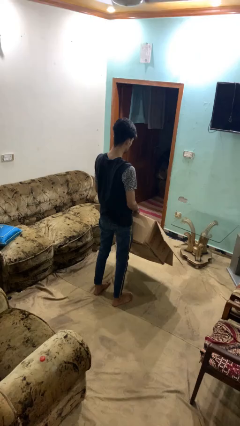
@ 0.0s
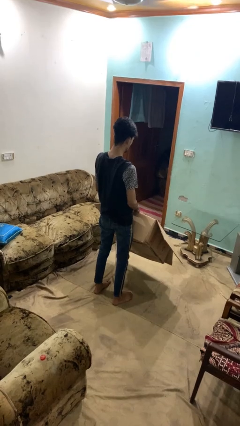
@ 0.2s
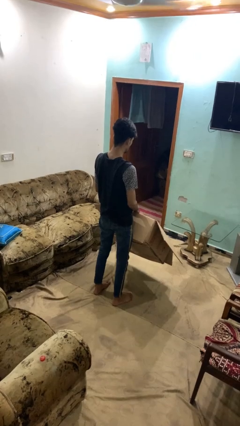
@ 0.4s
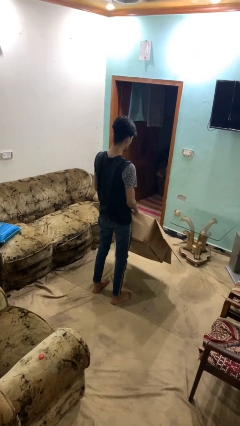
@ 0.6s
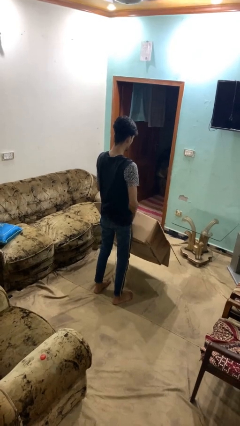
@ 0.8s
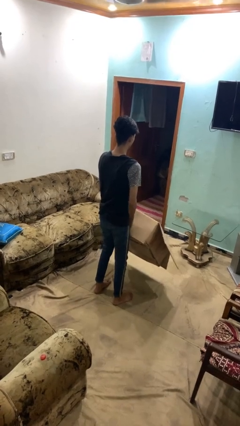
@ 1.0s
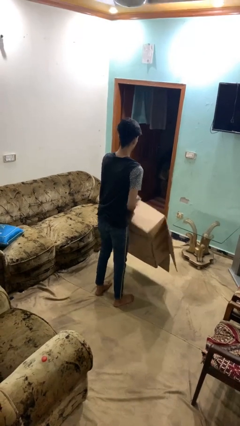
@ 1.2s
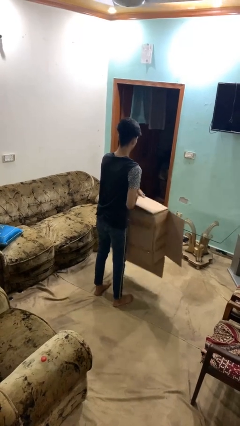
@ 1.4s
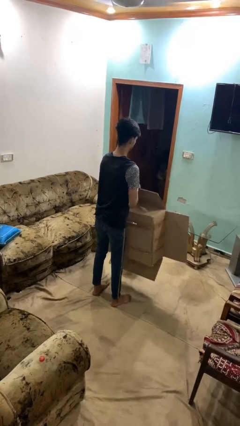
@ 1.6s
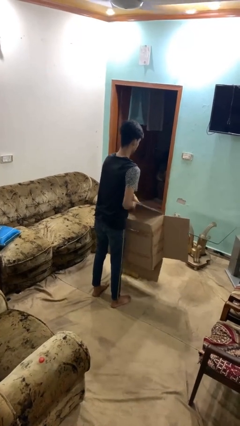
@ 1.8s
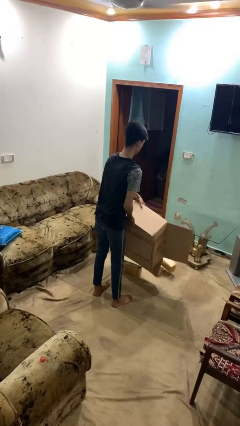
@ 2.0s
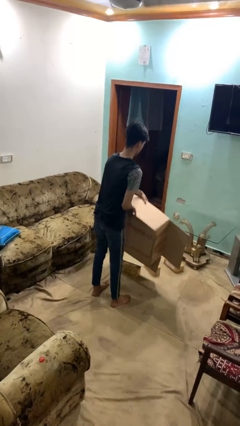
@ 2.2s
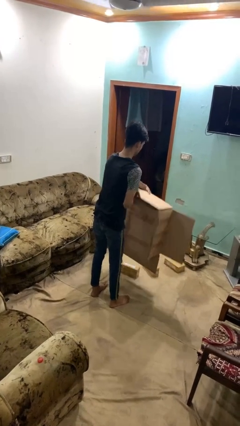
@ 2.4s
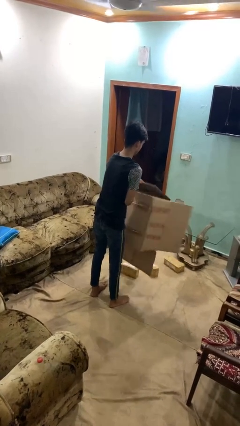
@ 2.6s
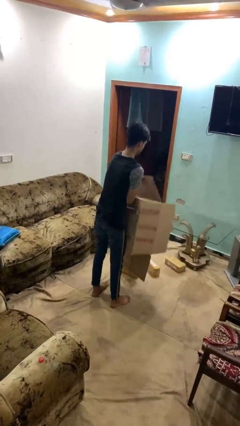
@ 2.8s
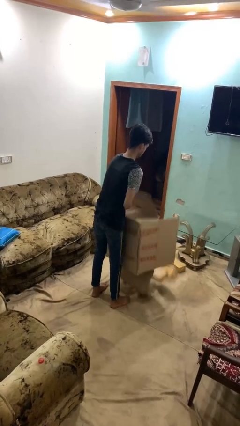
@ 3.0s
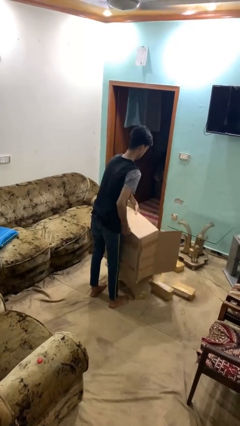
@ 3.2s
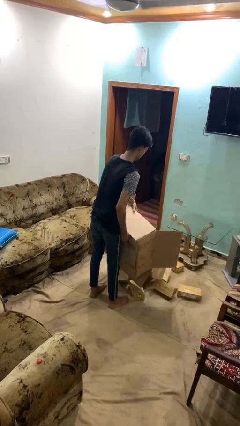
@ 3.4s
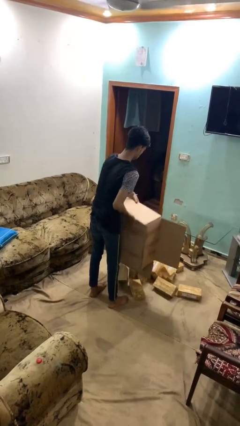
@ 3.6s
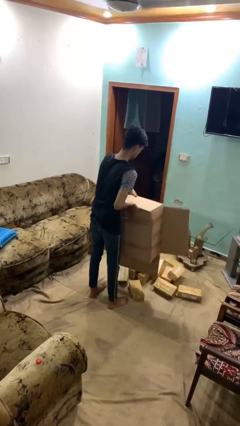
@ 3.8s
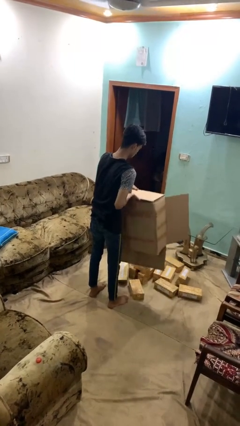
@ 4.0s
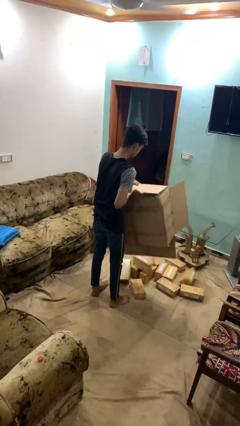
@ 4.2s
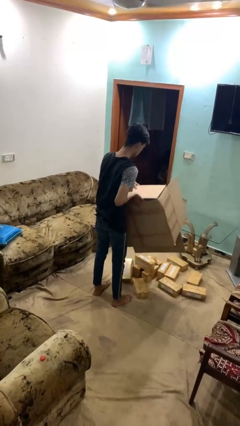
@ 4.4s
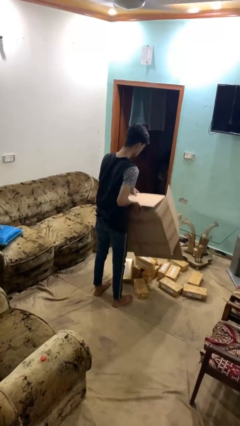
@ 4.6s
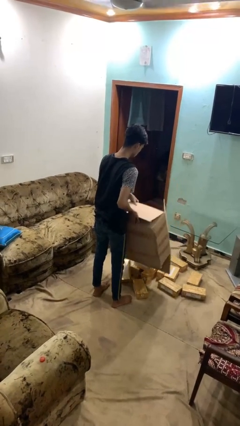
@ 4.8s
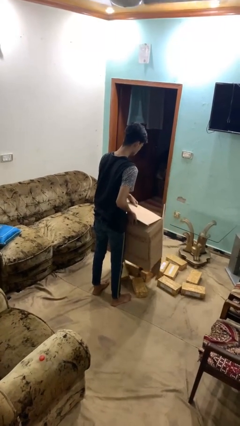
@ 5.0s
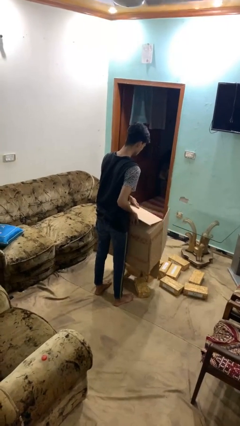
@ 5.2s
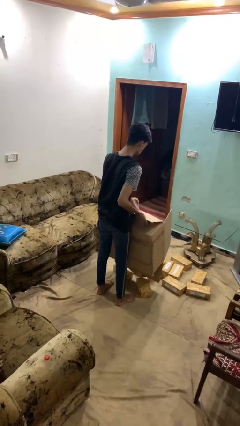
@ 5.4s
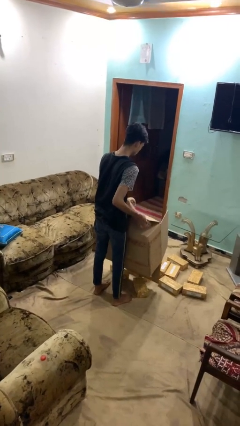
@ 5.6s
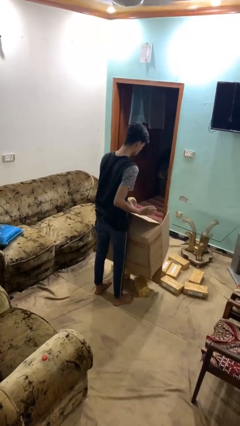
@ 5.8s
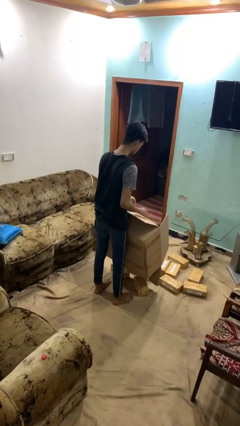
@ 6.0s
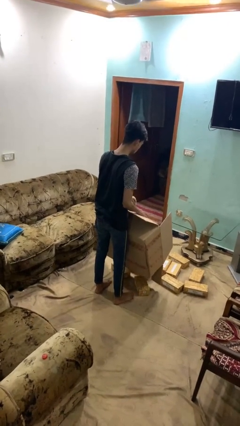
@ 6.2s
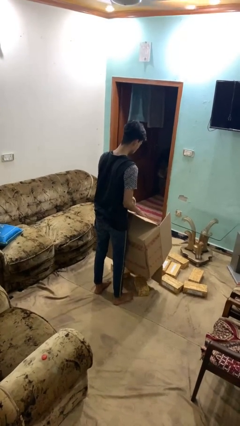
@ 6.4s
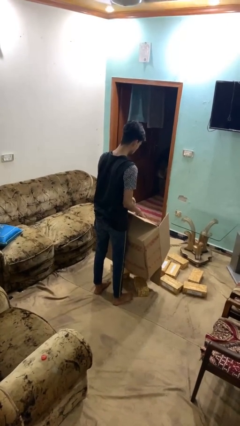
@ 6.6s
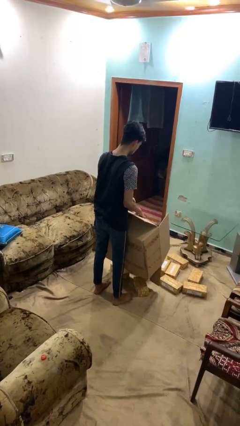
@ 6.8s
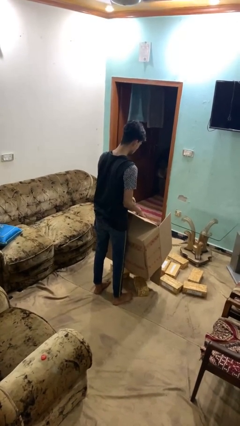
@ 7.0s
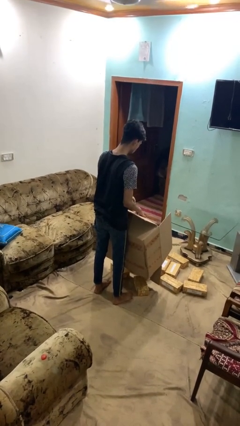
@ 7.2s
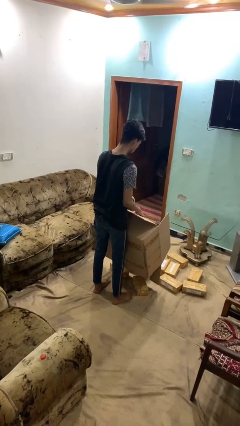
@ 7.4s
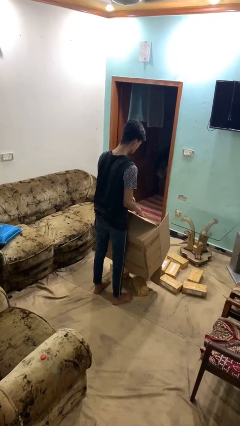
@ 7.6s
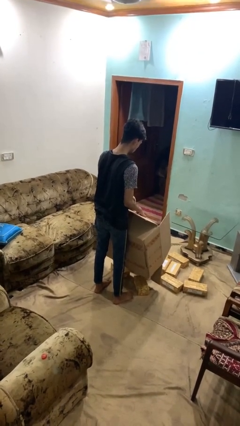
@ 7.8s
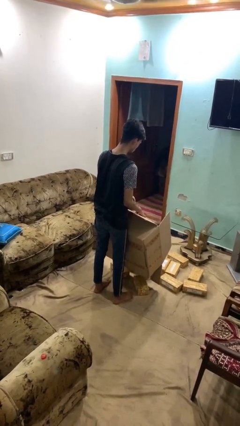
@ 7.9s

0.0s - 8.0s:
person unloads box onto floor

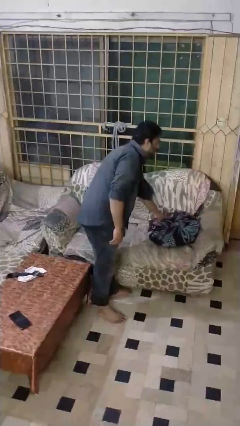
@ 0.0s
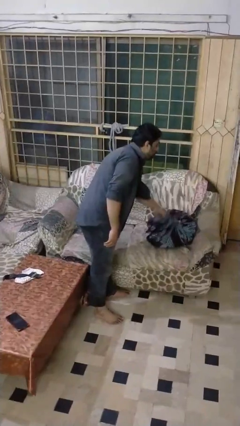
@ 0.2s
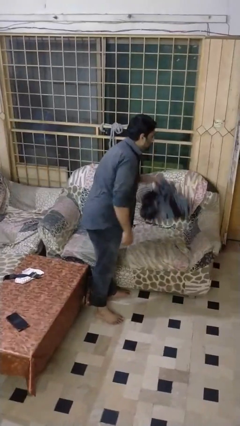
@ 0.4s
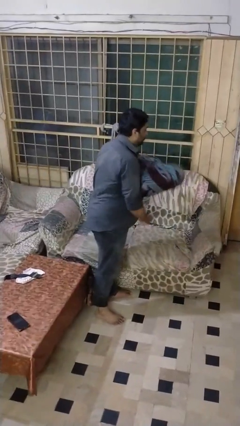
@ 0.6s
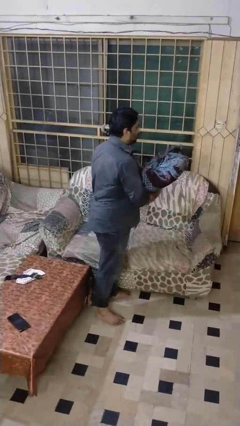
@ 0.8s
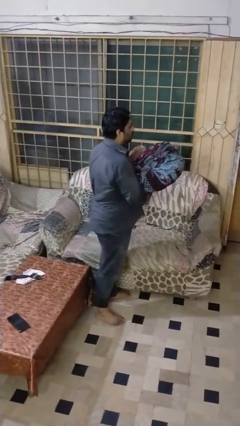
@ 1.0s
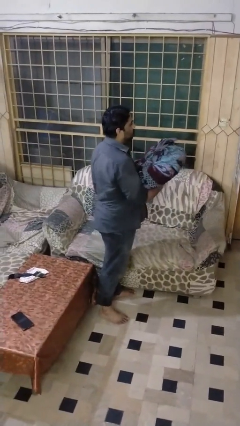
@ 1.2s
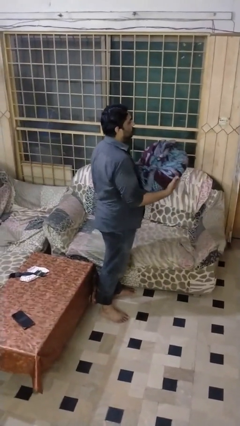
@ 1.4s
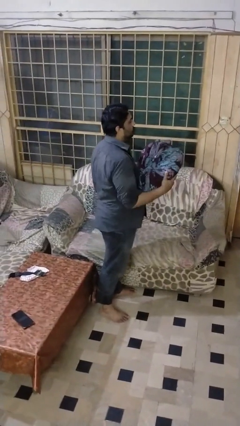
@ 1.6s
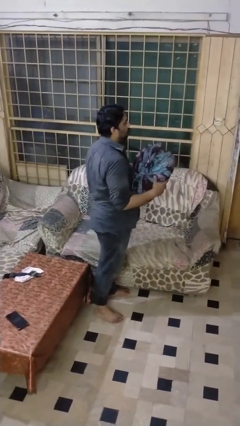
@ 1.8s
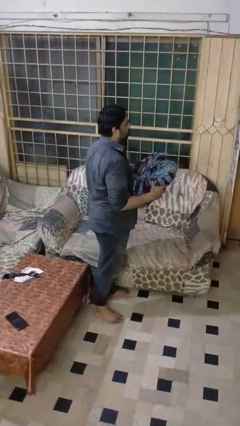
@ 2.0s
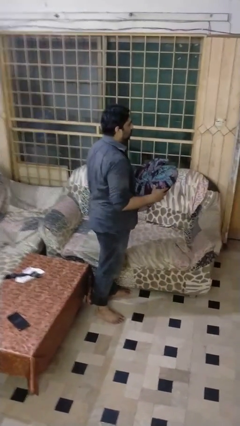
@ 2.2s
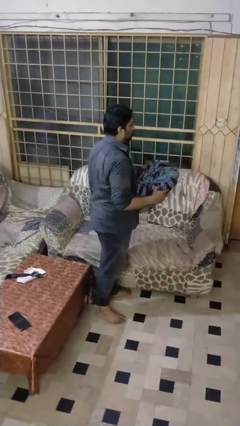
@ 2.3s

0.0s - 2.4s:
person picks up object from couch

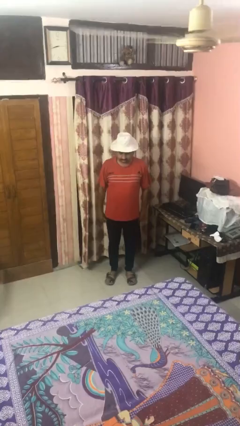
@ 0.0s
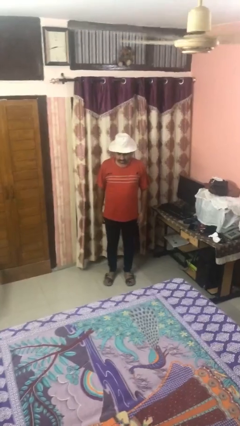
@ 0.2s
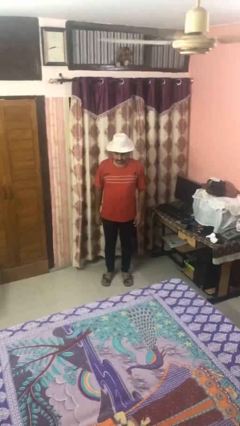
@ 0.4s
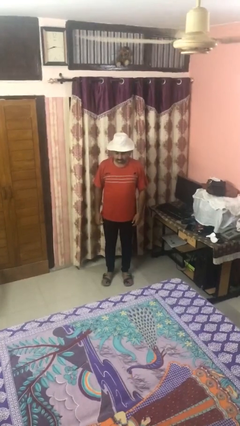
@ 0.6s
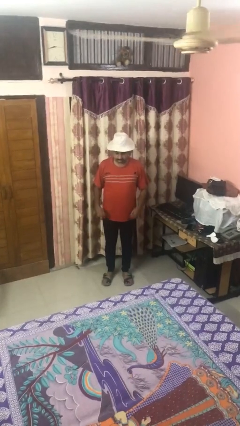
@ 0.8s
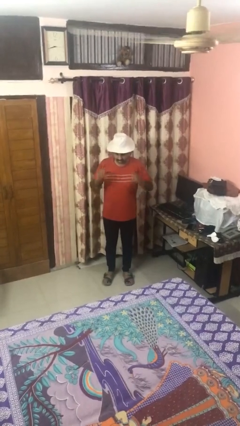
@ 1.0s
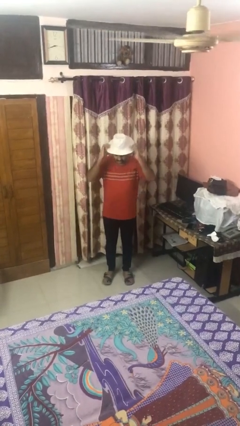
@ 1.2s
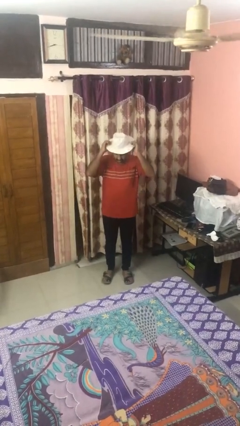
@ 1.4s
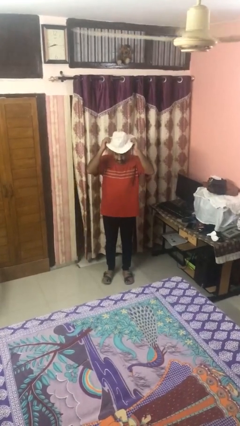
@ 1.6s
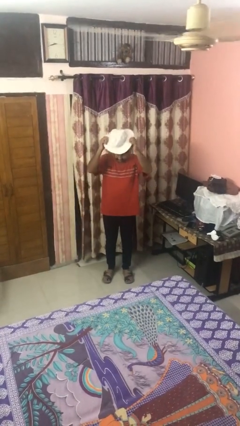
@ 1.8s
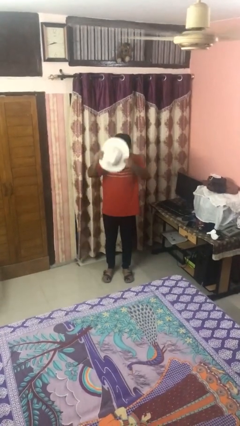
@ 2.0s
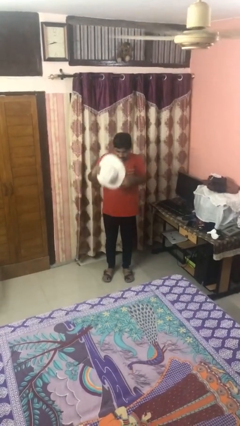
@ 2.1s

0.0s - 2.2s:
person takes off hat

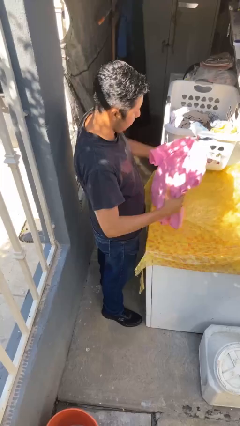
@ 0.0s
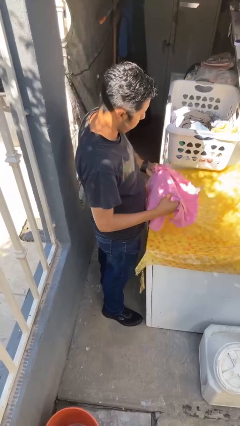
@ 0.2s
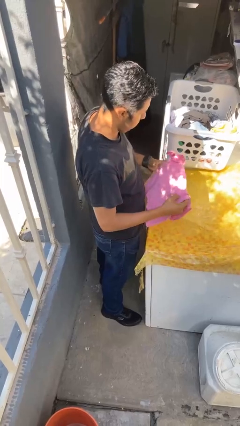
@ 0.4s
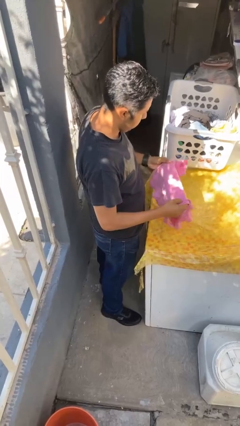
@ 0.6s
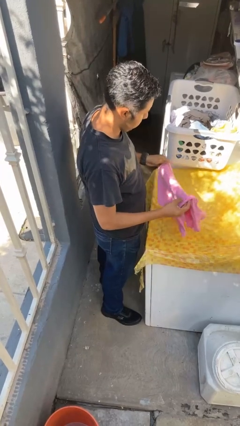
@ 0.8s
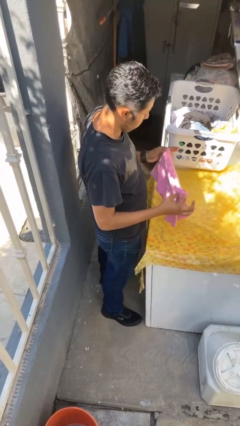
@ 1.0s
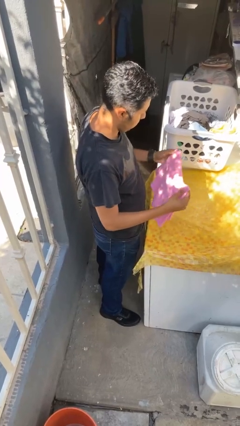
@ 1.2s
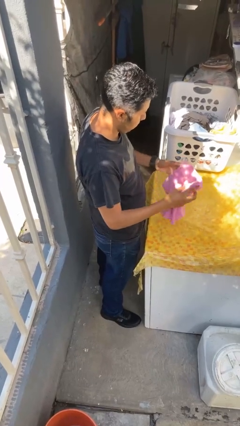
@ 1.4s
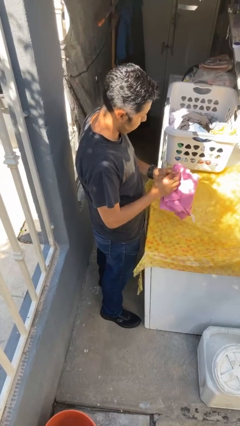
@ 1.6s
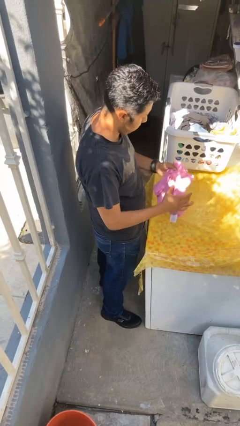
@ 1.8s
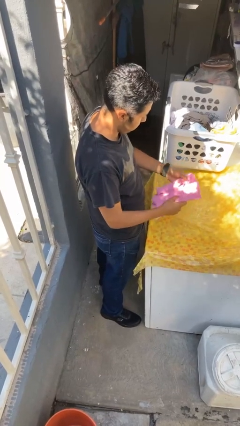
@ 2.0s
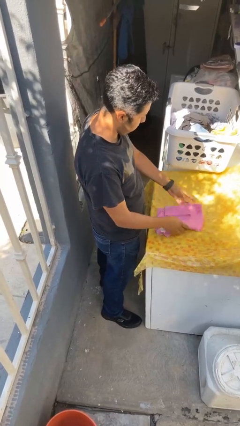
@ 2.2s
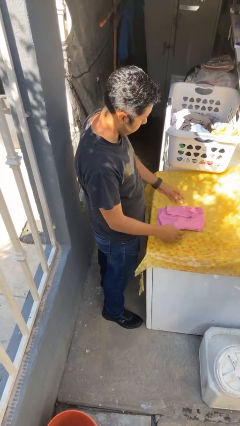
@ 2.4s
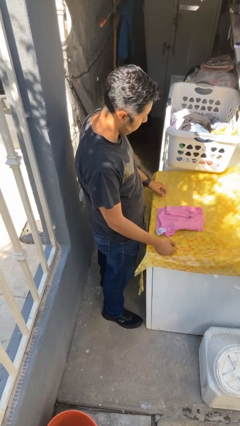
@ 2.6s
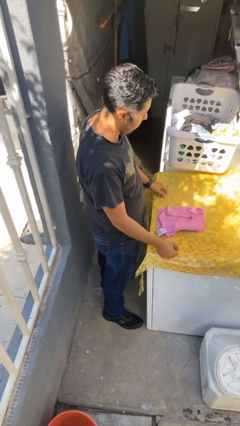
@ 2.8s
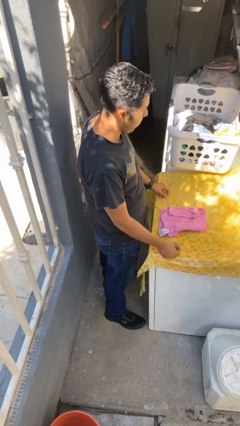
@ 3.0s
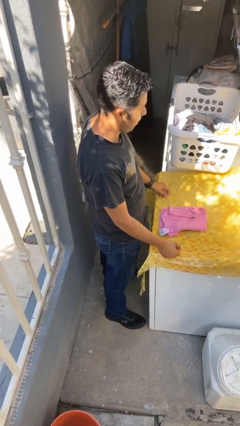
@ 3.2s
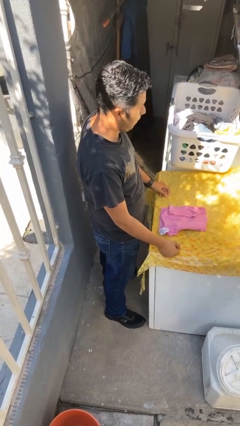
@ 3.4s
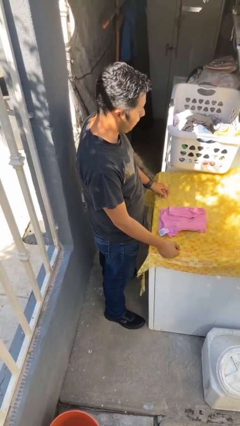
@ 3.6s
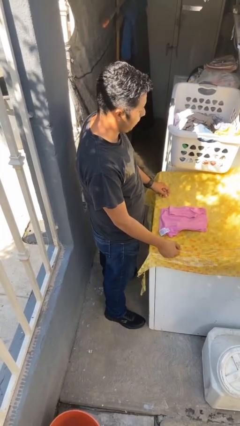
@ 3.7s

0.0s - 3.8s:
person folds shirt

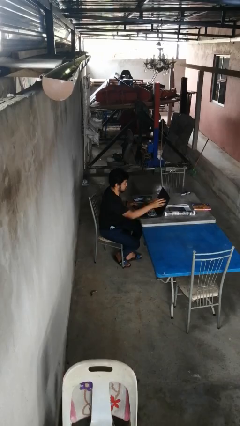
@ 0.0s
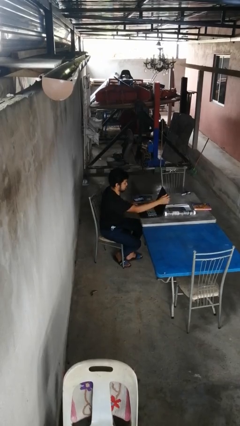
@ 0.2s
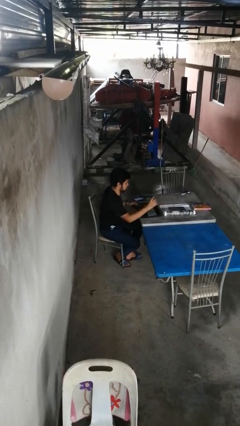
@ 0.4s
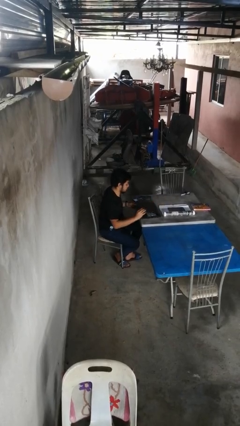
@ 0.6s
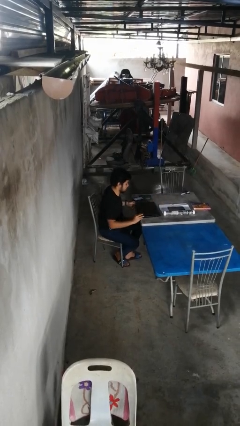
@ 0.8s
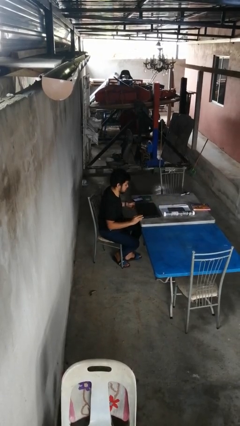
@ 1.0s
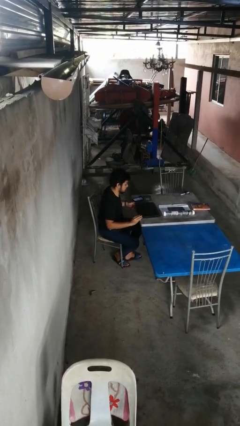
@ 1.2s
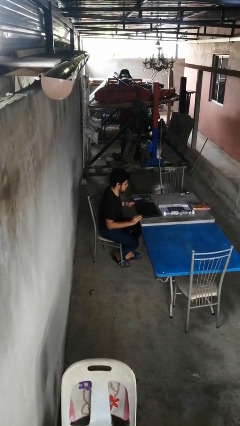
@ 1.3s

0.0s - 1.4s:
person closes laptop

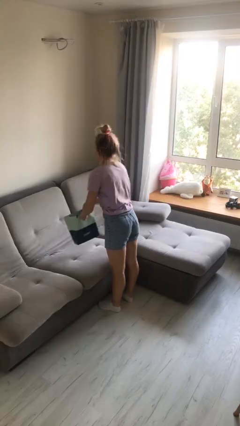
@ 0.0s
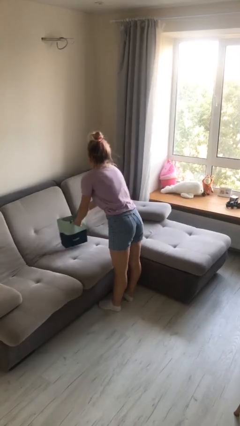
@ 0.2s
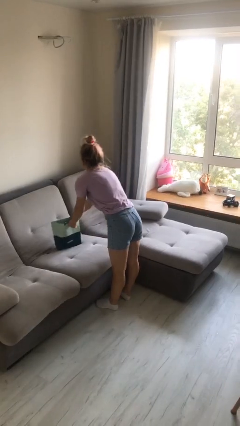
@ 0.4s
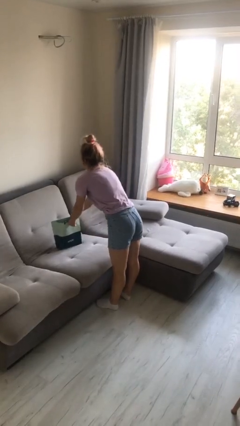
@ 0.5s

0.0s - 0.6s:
person puts down object on couch
